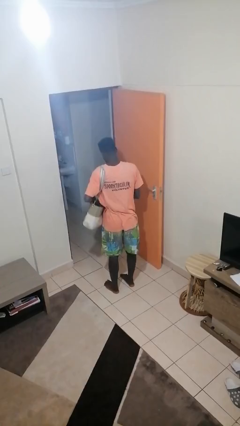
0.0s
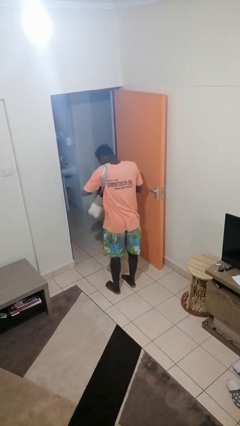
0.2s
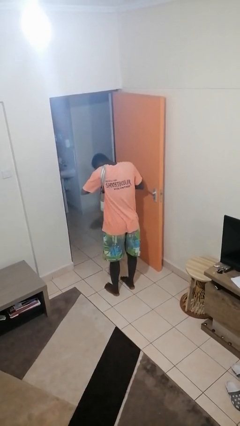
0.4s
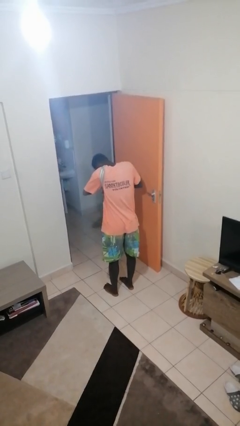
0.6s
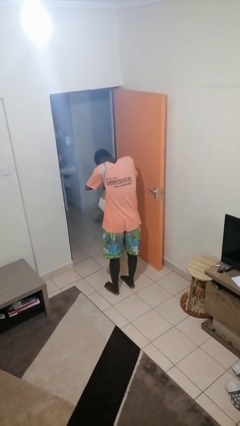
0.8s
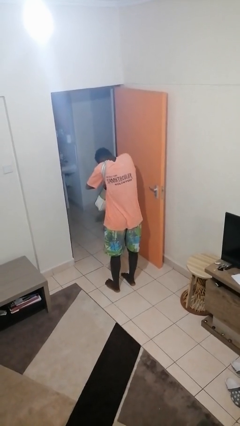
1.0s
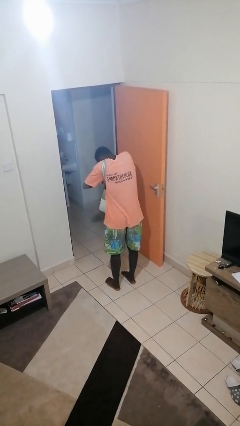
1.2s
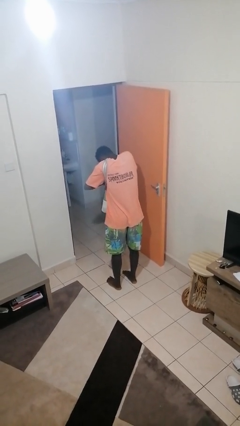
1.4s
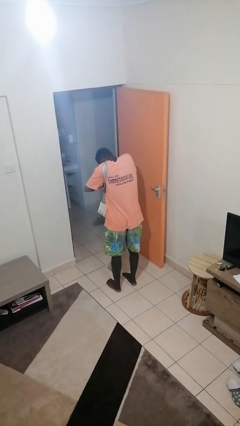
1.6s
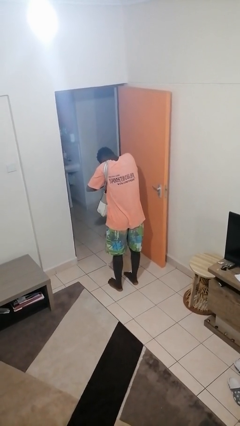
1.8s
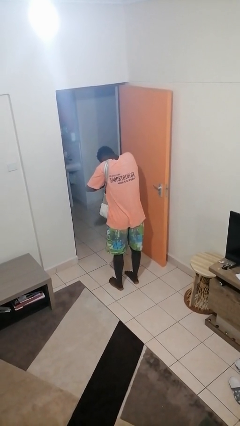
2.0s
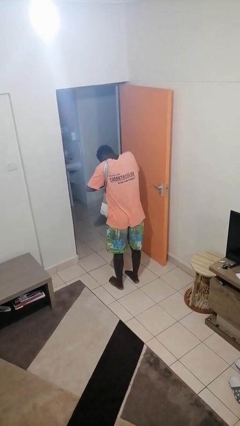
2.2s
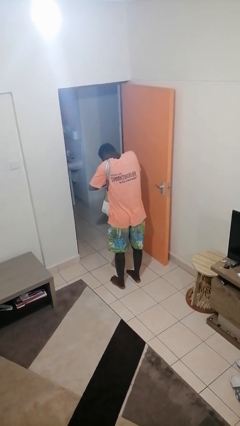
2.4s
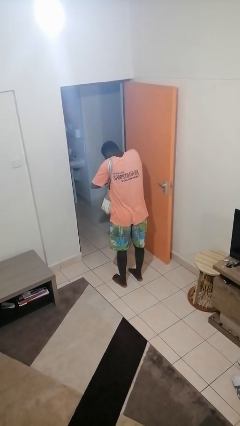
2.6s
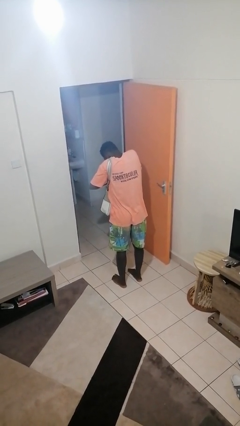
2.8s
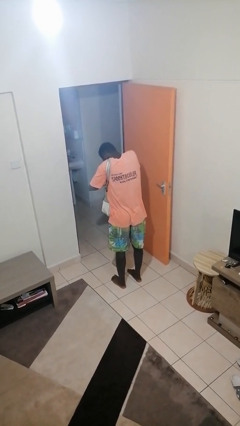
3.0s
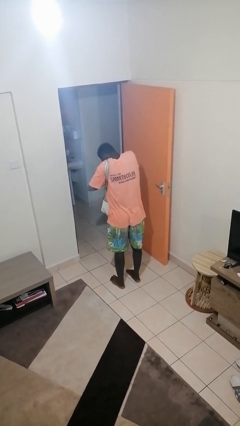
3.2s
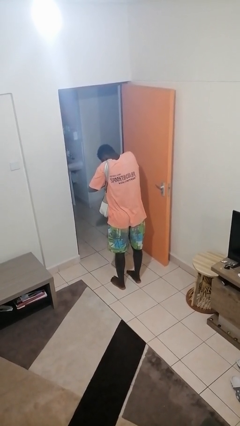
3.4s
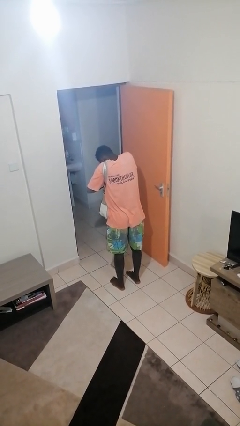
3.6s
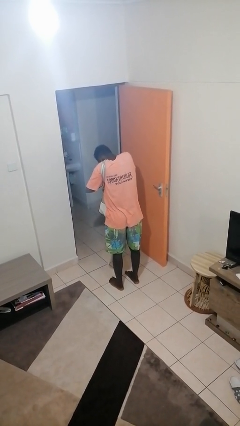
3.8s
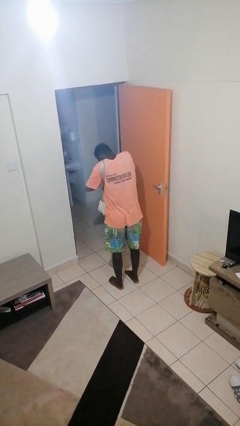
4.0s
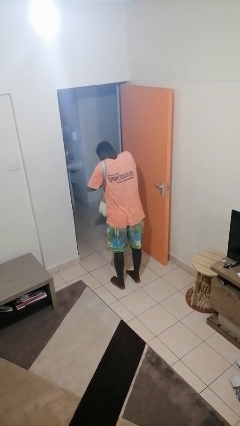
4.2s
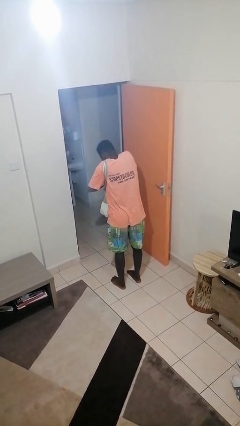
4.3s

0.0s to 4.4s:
person searches in purse

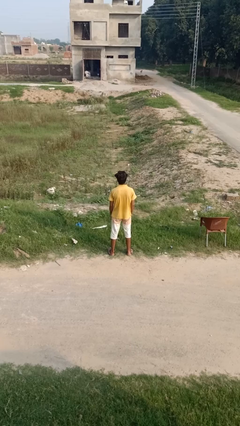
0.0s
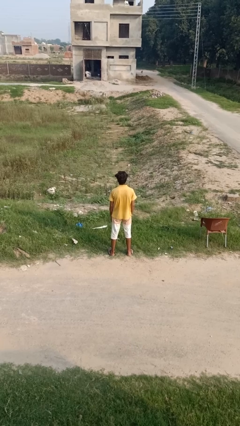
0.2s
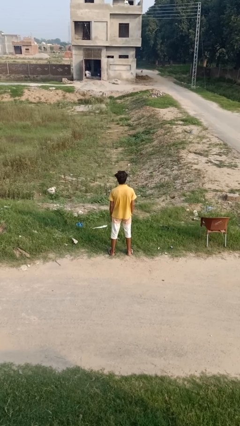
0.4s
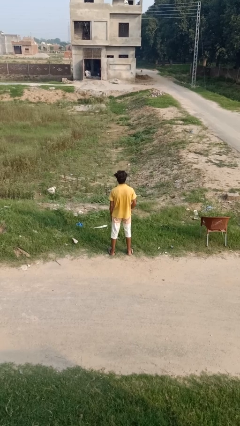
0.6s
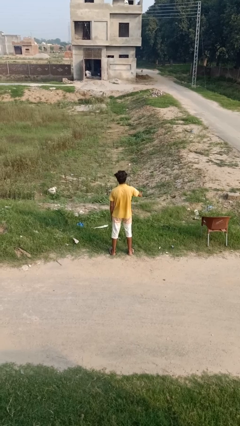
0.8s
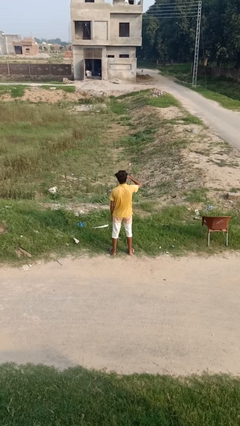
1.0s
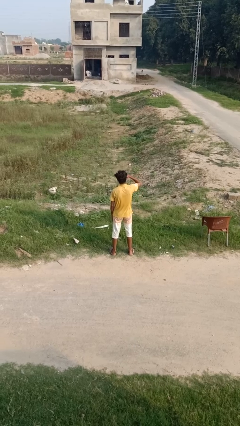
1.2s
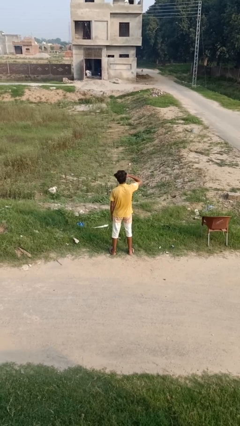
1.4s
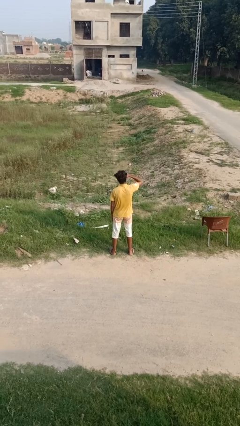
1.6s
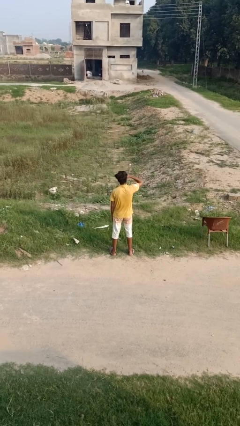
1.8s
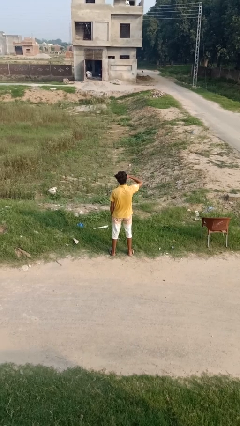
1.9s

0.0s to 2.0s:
person shades eyes

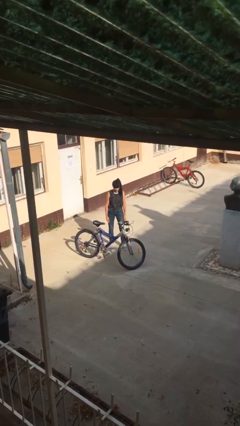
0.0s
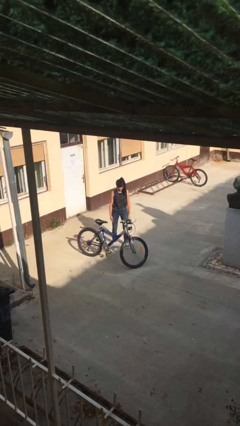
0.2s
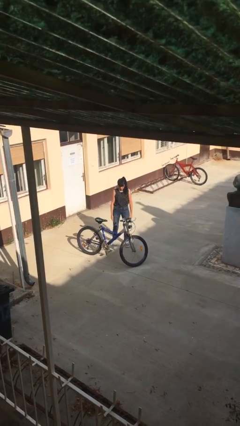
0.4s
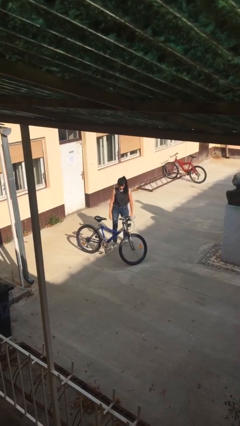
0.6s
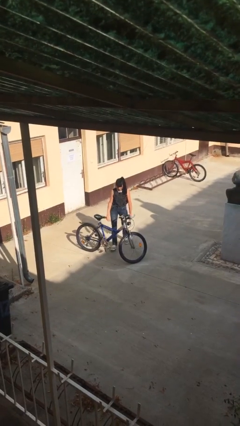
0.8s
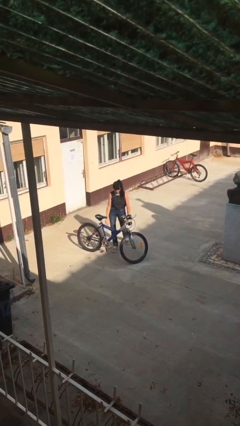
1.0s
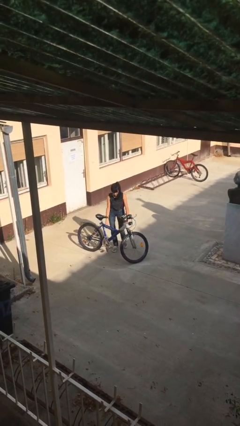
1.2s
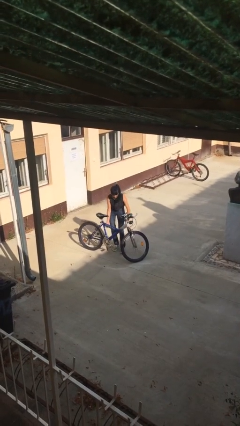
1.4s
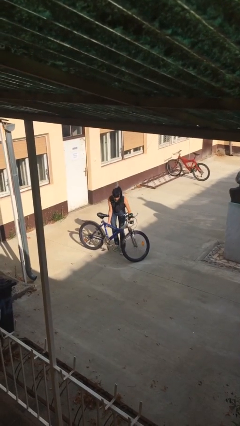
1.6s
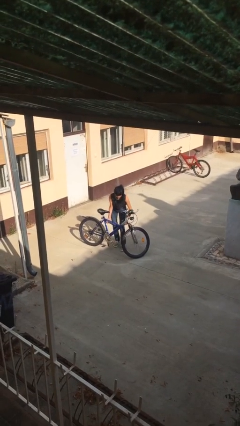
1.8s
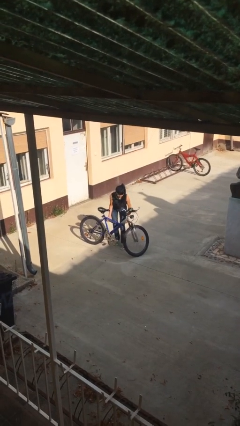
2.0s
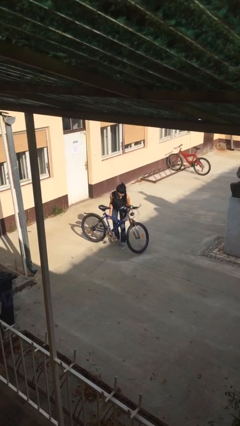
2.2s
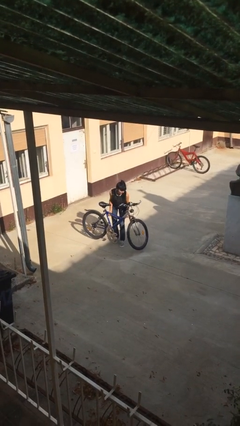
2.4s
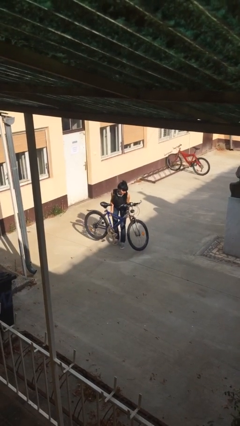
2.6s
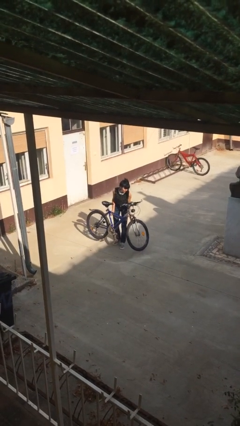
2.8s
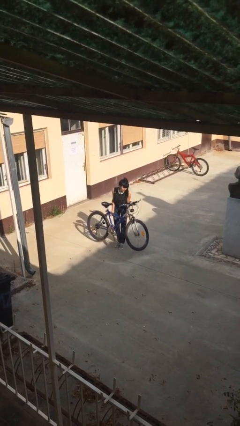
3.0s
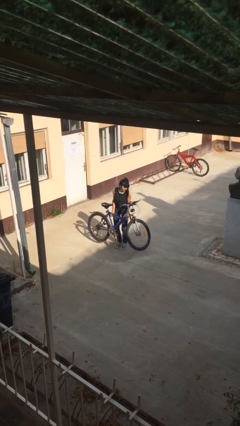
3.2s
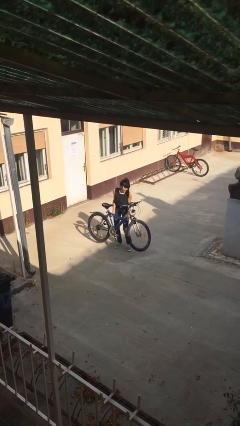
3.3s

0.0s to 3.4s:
person picks up object from floor

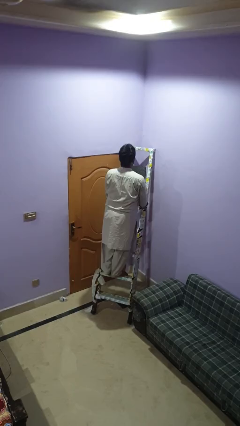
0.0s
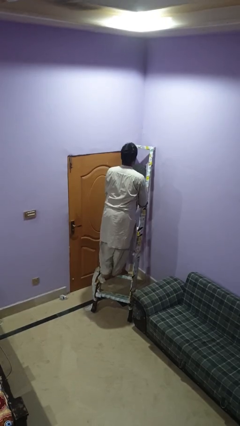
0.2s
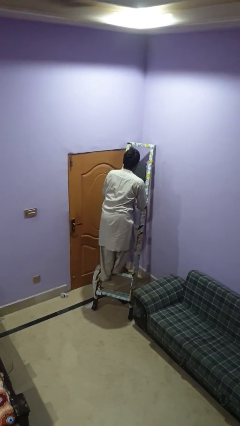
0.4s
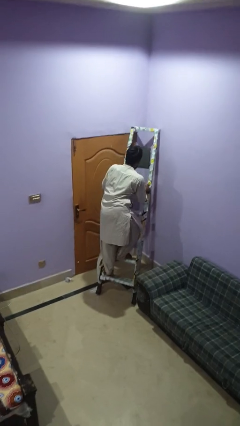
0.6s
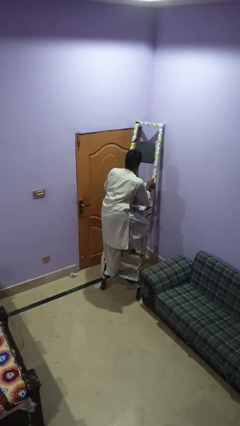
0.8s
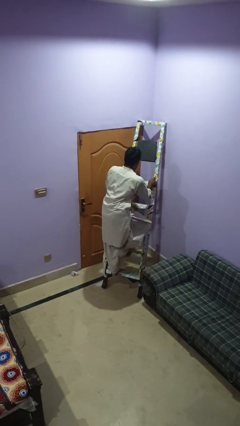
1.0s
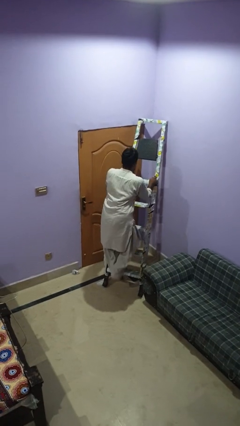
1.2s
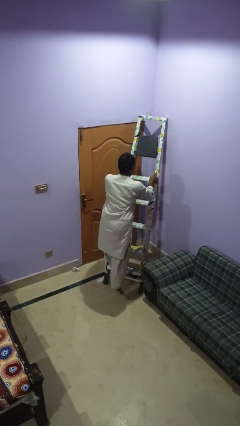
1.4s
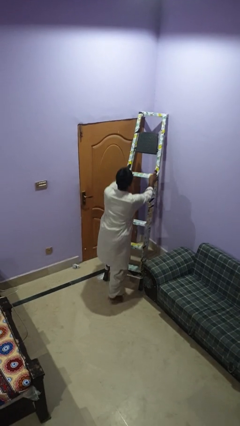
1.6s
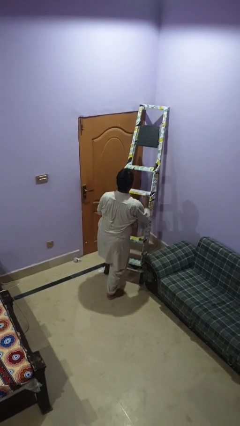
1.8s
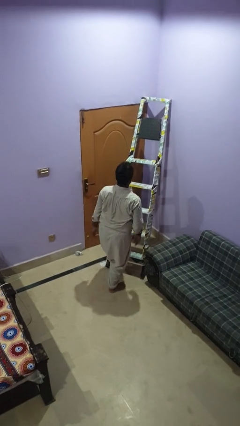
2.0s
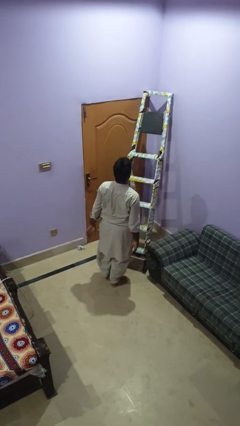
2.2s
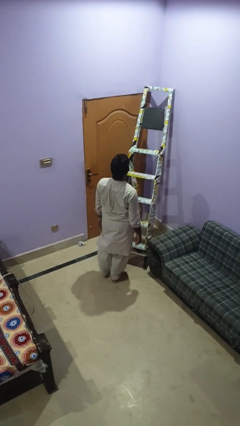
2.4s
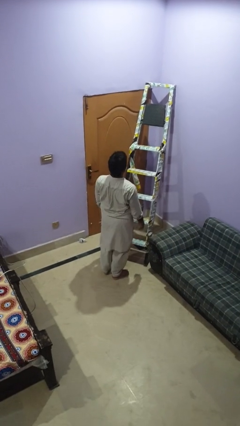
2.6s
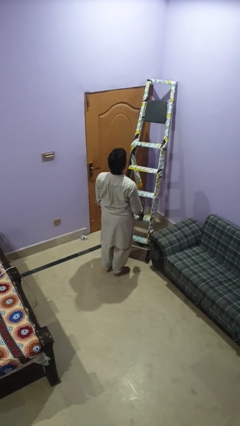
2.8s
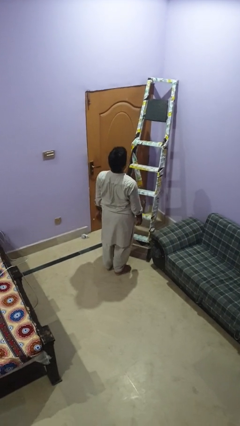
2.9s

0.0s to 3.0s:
person climbs down ladder

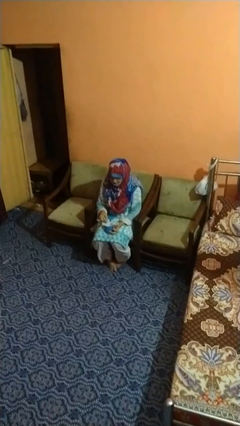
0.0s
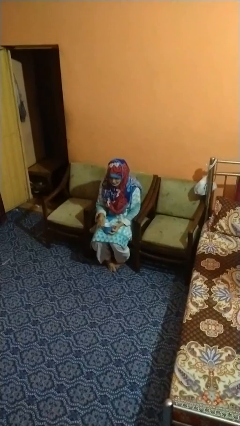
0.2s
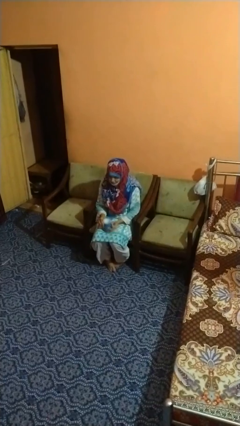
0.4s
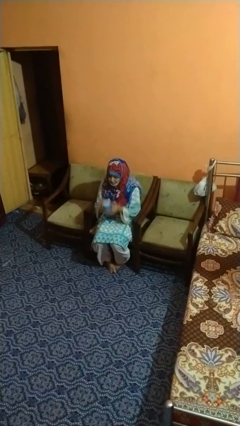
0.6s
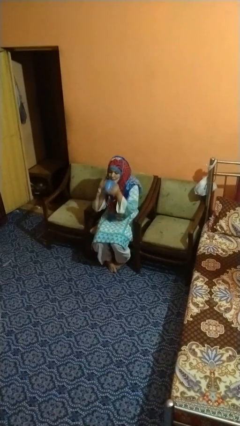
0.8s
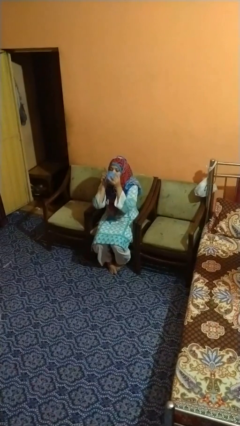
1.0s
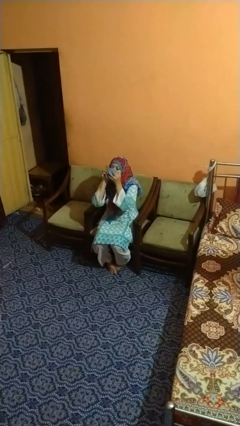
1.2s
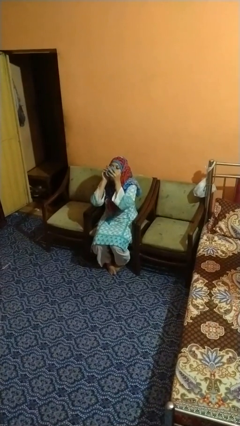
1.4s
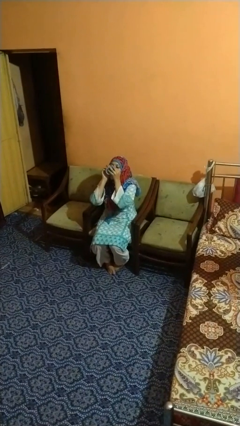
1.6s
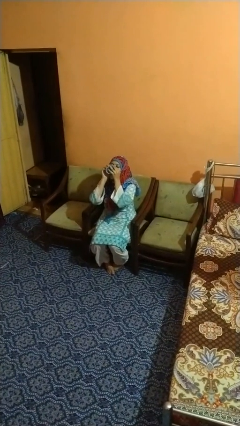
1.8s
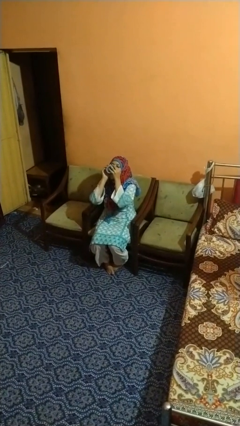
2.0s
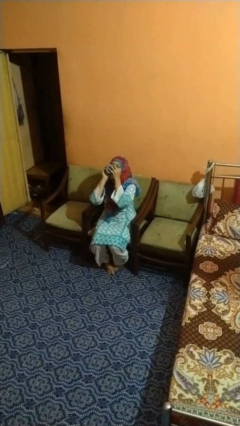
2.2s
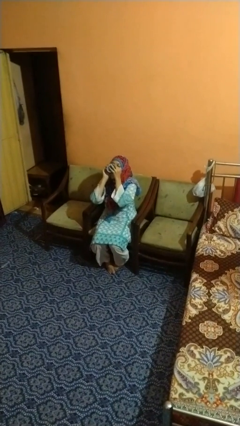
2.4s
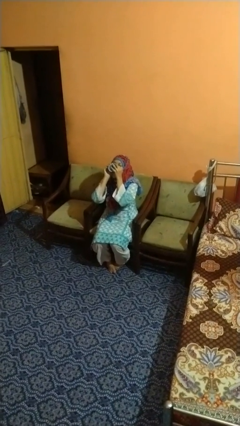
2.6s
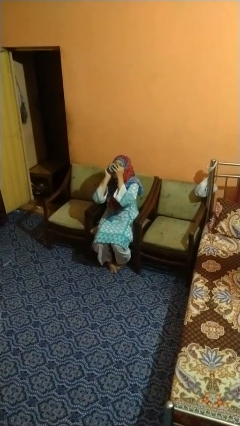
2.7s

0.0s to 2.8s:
person drinks from mug

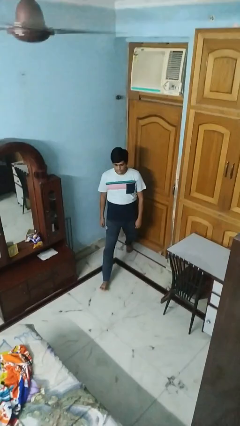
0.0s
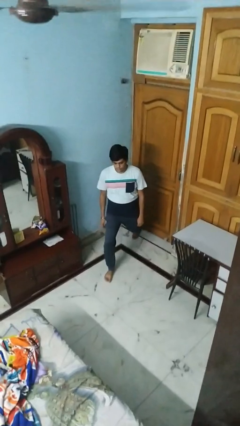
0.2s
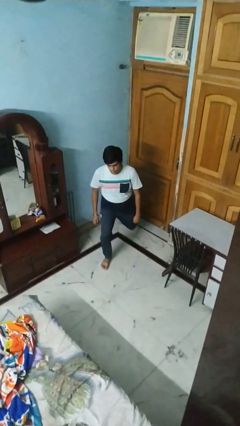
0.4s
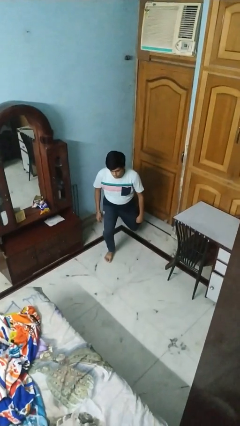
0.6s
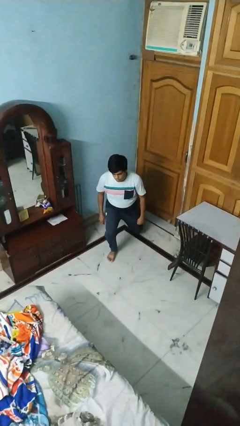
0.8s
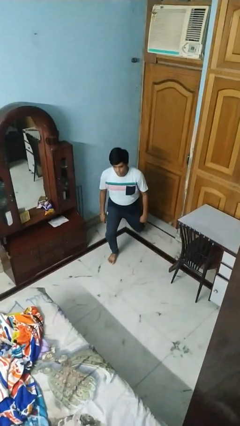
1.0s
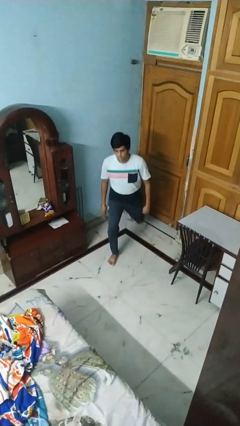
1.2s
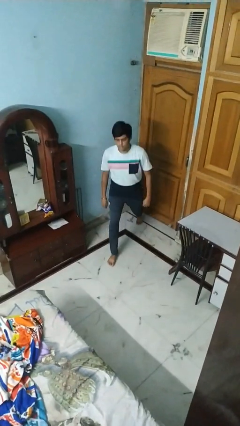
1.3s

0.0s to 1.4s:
person exercises with lunges
